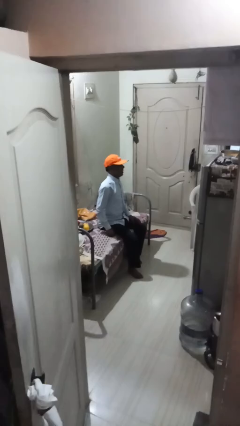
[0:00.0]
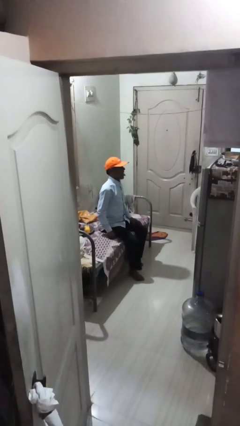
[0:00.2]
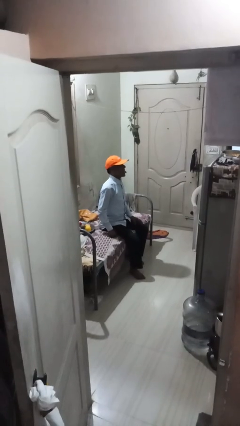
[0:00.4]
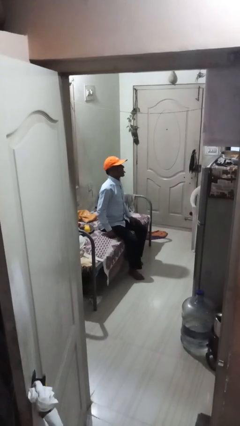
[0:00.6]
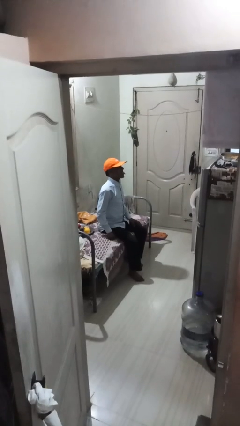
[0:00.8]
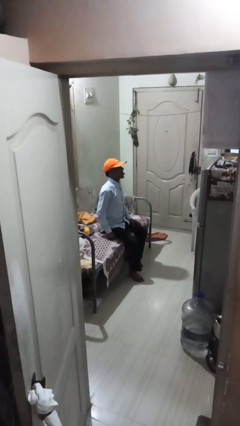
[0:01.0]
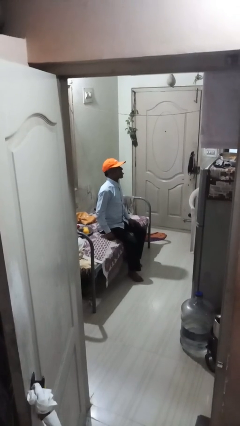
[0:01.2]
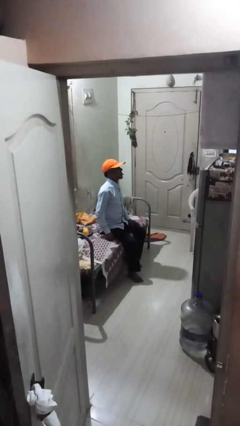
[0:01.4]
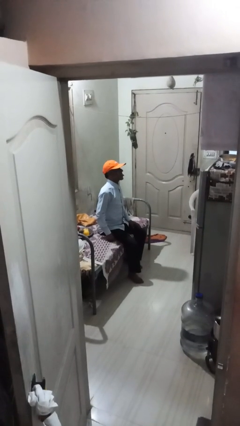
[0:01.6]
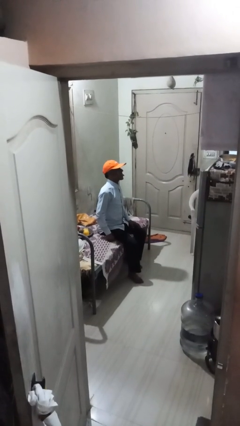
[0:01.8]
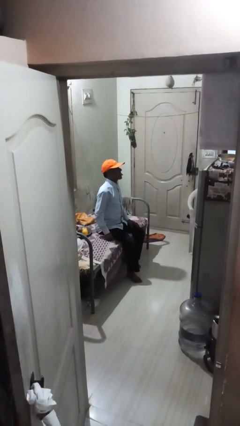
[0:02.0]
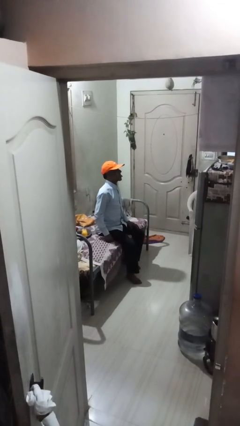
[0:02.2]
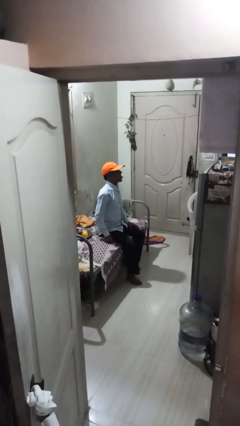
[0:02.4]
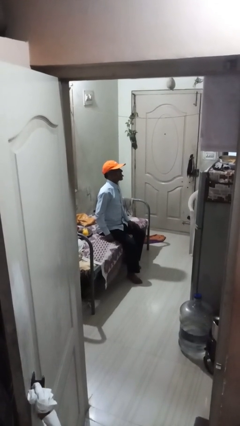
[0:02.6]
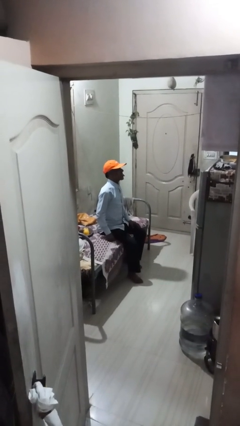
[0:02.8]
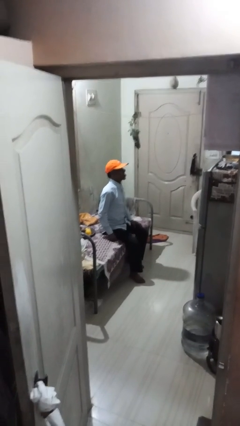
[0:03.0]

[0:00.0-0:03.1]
person sticks out tongue

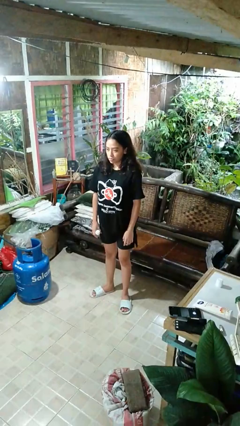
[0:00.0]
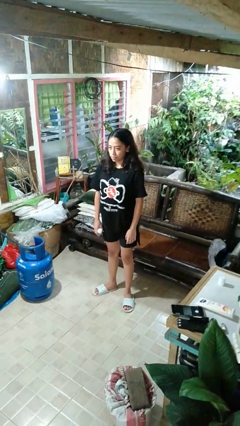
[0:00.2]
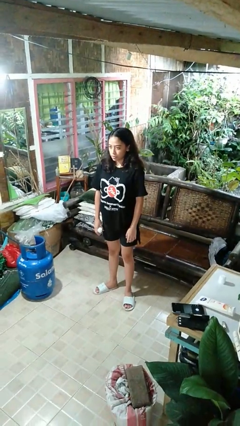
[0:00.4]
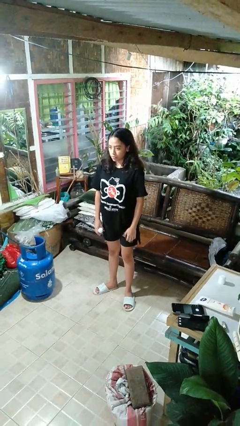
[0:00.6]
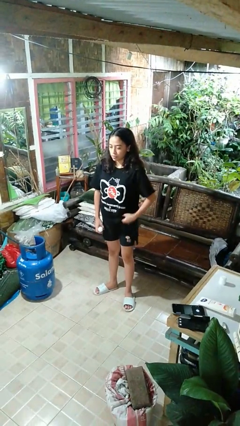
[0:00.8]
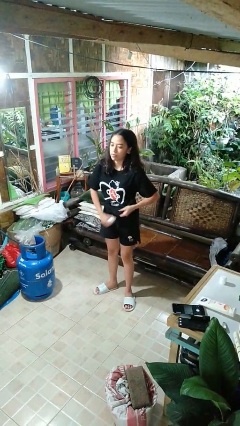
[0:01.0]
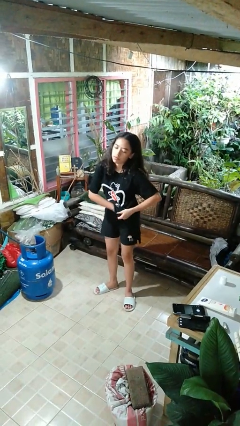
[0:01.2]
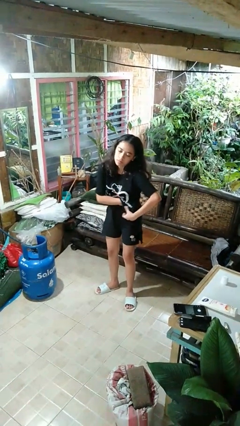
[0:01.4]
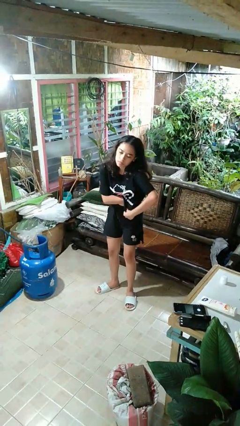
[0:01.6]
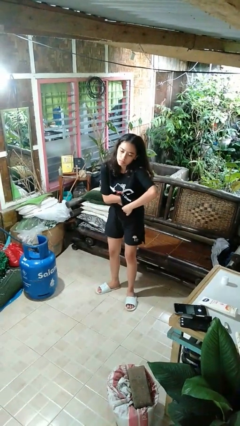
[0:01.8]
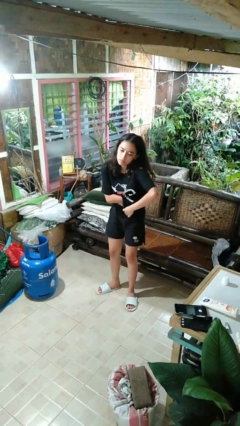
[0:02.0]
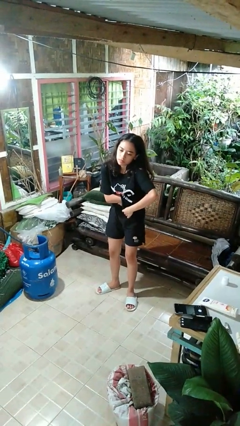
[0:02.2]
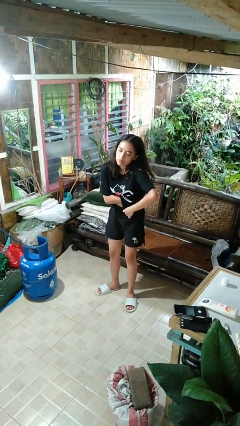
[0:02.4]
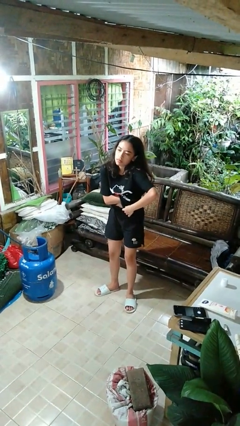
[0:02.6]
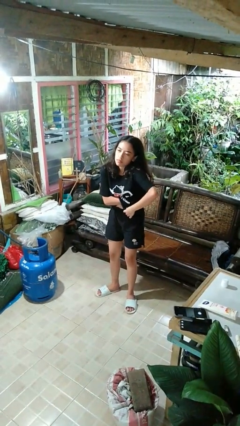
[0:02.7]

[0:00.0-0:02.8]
person applies deodorant

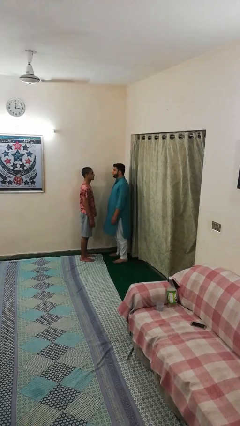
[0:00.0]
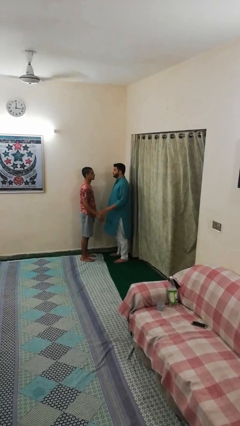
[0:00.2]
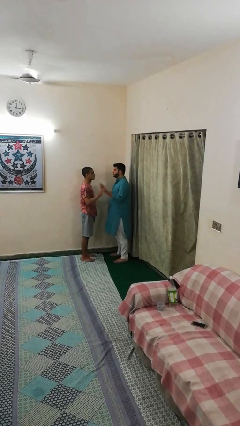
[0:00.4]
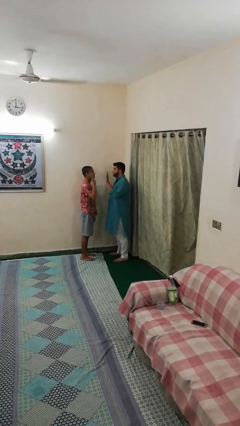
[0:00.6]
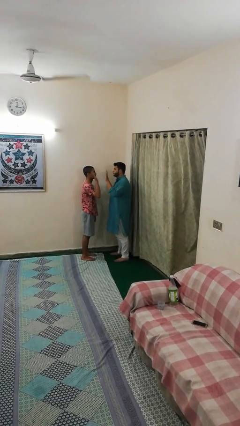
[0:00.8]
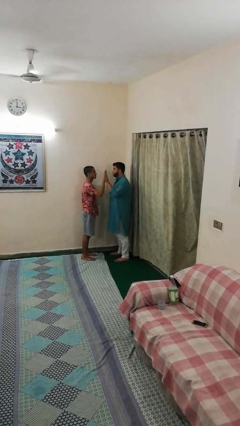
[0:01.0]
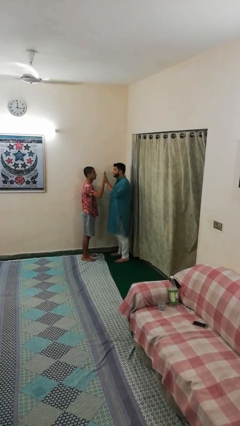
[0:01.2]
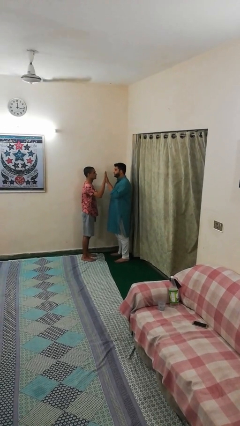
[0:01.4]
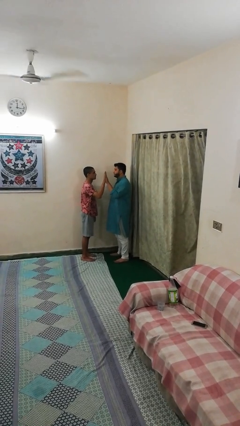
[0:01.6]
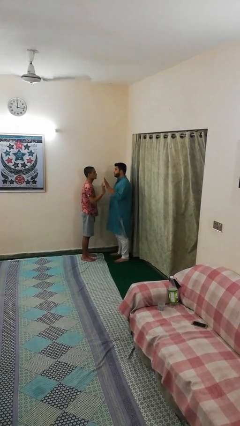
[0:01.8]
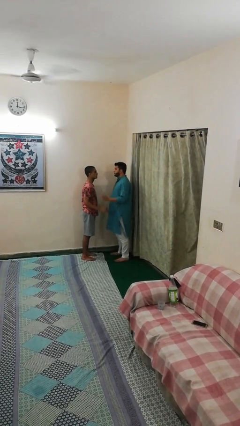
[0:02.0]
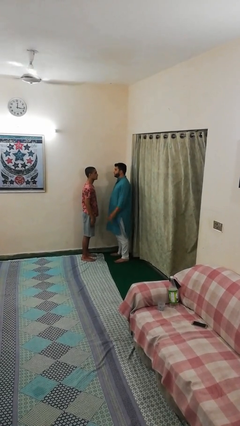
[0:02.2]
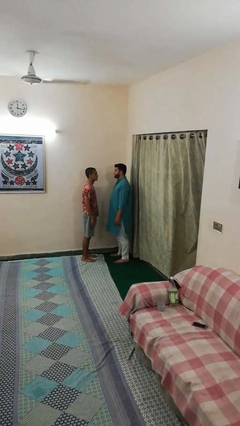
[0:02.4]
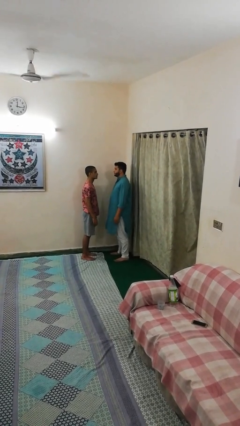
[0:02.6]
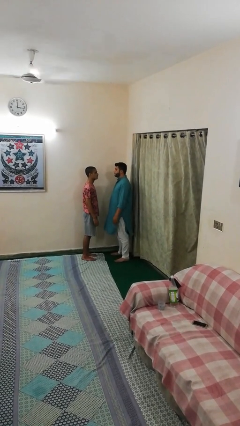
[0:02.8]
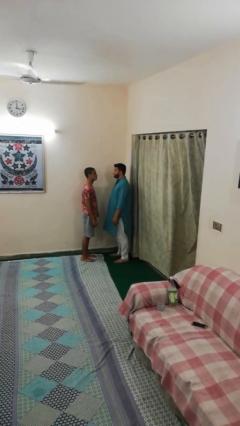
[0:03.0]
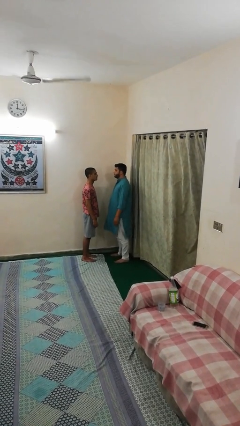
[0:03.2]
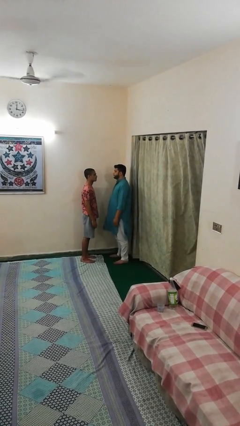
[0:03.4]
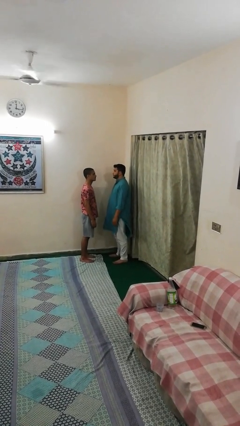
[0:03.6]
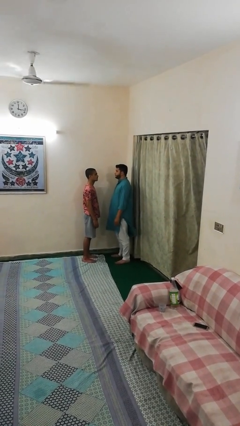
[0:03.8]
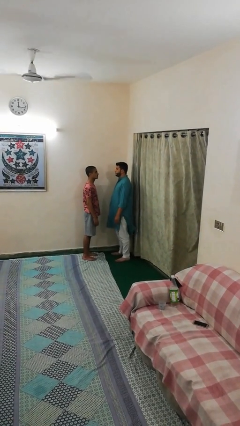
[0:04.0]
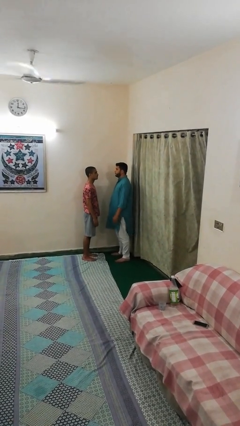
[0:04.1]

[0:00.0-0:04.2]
person highfives hand

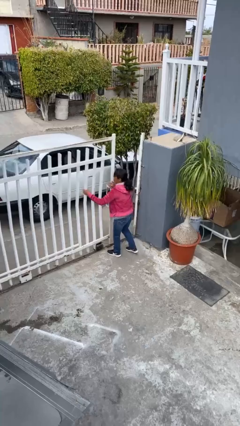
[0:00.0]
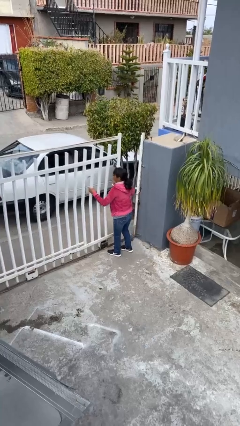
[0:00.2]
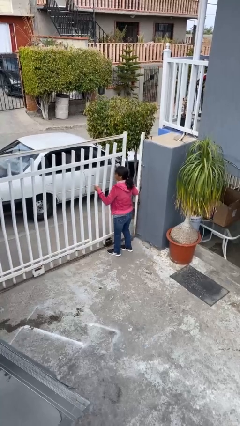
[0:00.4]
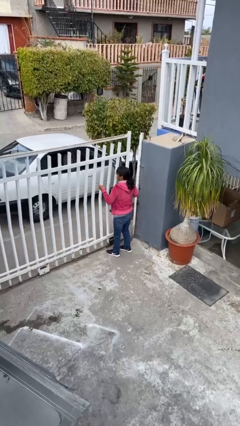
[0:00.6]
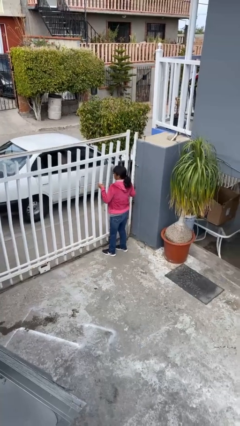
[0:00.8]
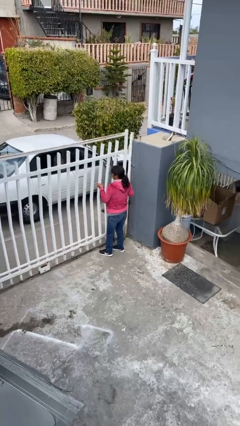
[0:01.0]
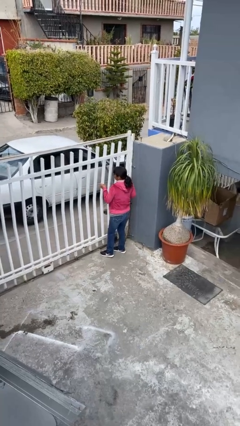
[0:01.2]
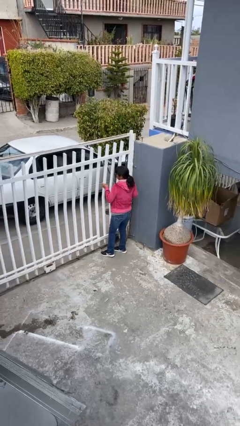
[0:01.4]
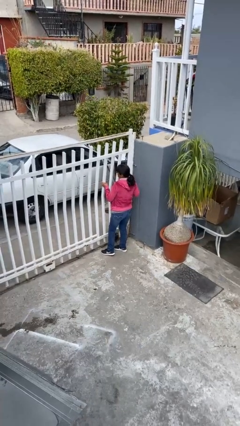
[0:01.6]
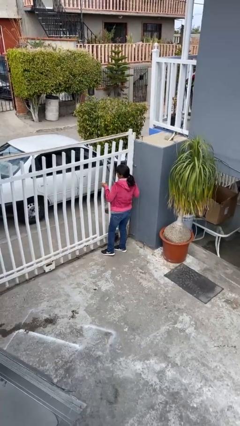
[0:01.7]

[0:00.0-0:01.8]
person closes facility door

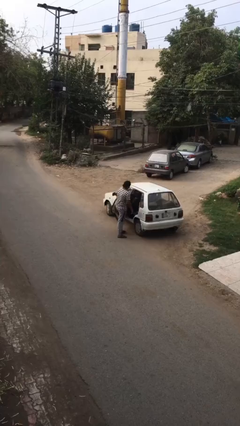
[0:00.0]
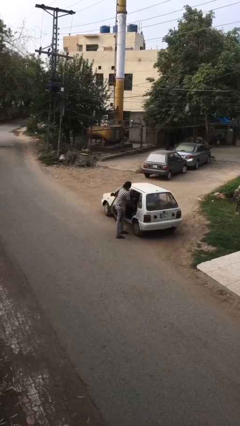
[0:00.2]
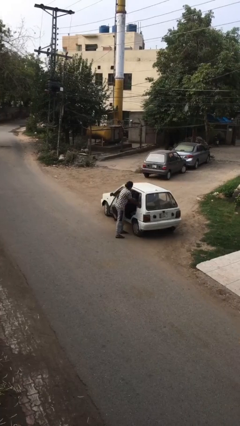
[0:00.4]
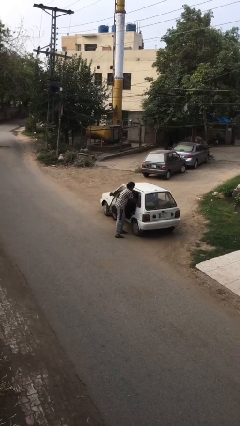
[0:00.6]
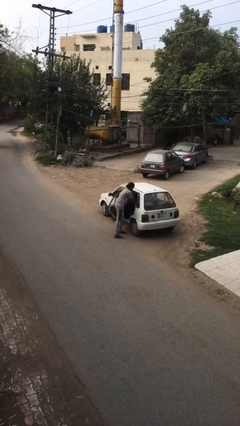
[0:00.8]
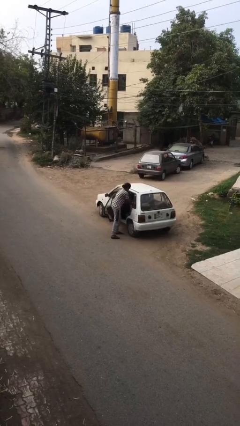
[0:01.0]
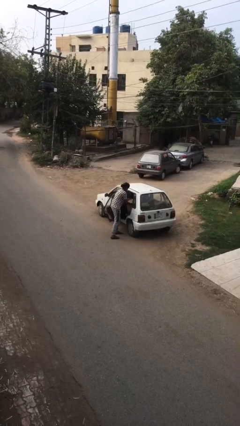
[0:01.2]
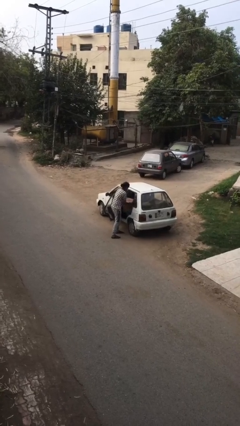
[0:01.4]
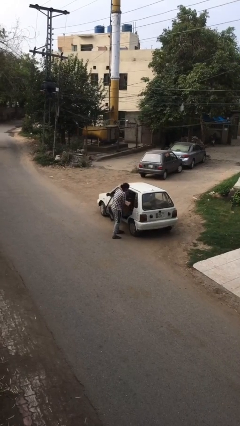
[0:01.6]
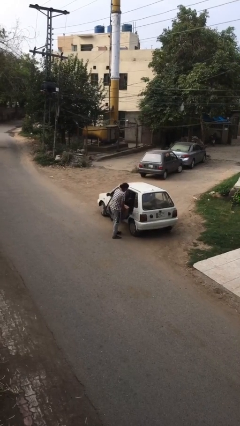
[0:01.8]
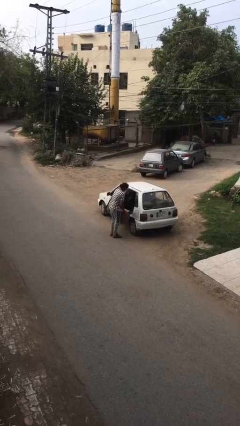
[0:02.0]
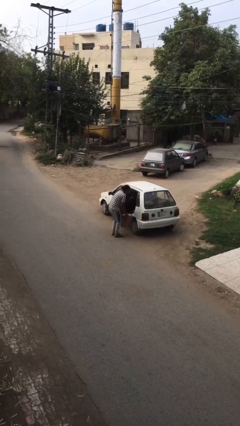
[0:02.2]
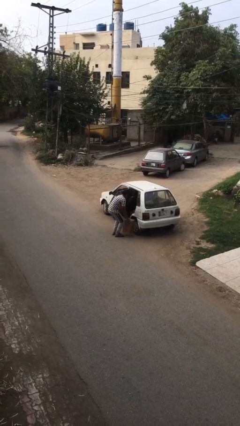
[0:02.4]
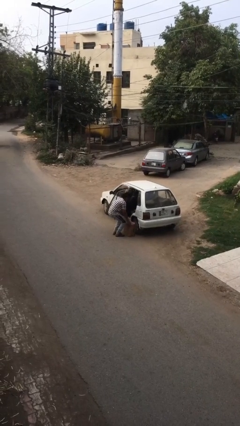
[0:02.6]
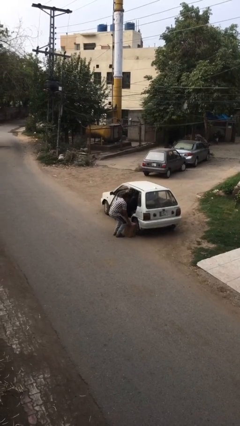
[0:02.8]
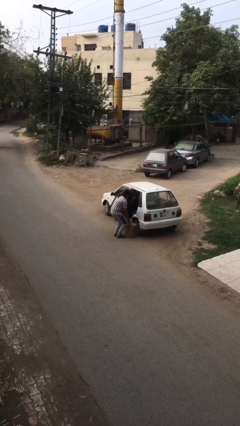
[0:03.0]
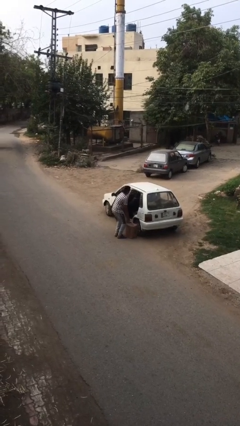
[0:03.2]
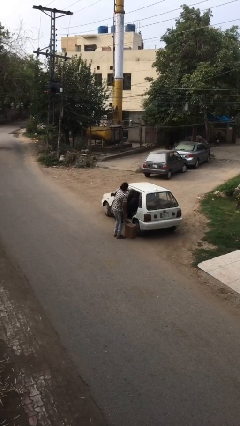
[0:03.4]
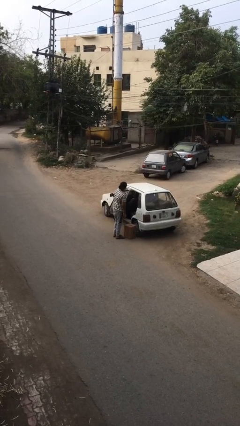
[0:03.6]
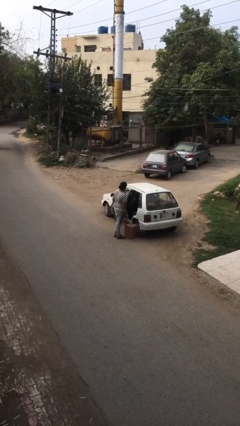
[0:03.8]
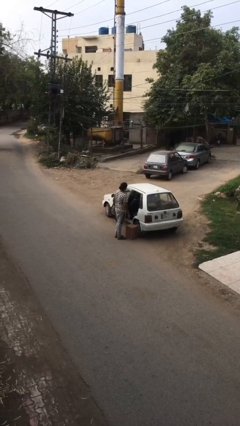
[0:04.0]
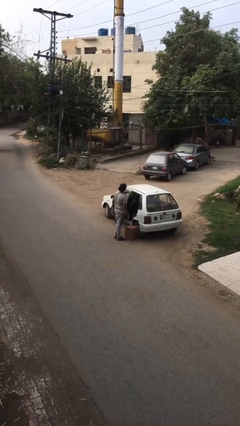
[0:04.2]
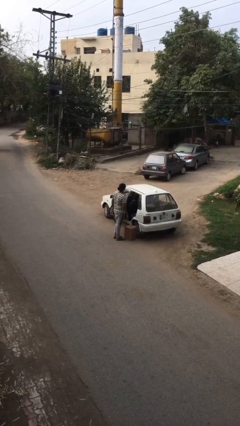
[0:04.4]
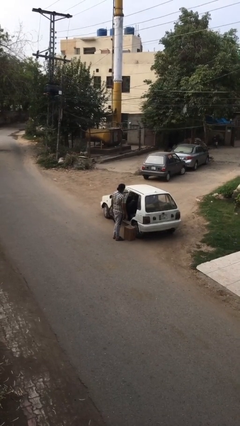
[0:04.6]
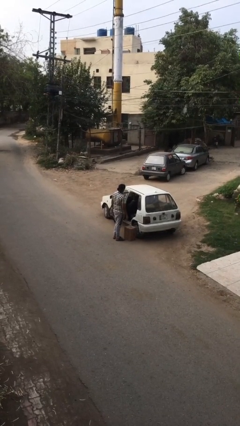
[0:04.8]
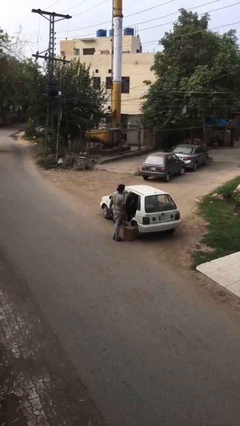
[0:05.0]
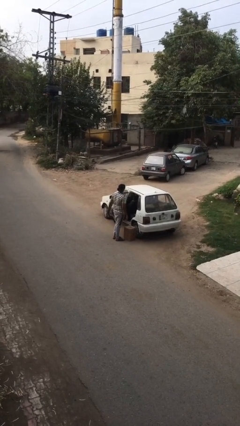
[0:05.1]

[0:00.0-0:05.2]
person unloads car

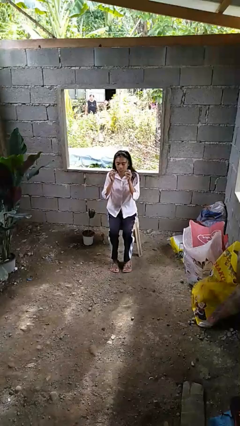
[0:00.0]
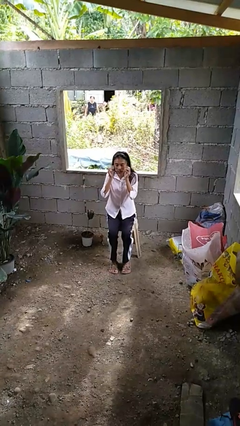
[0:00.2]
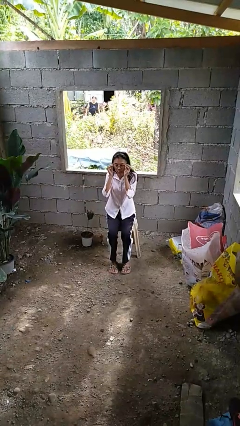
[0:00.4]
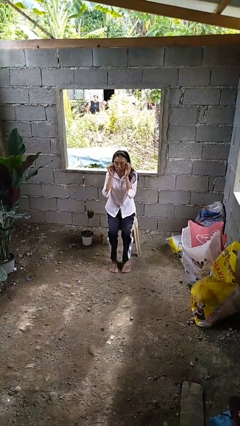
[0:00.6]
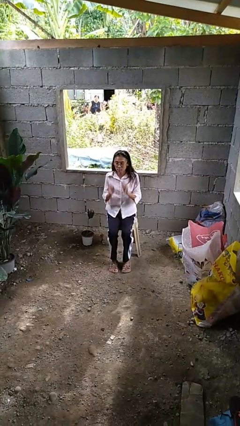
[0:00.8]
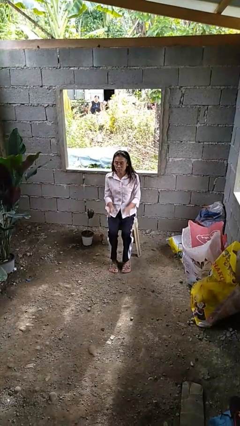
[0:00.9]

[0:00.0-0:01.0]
person puts on glasses
